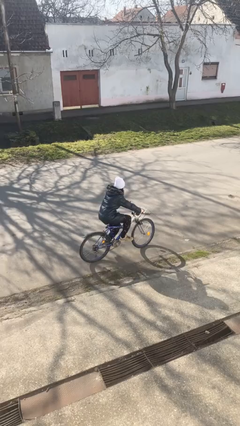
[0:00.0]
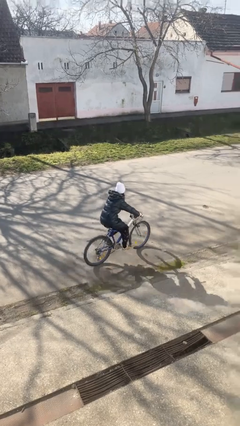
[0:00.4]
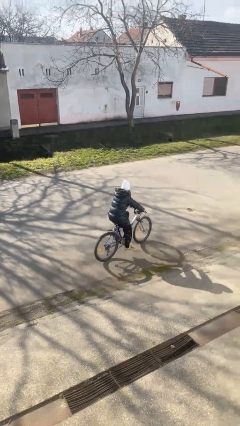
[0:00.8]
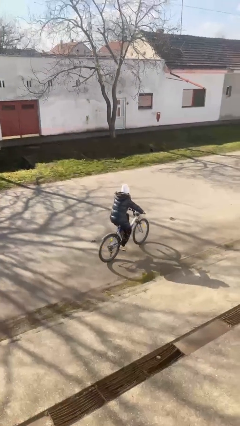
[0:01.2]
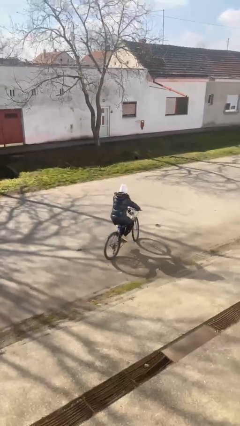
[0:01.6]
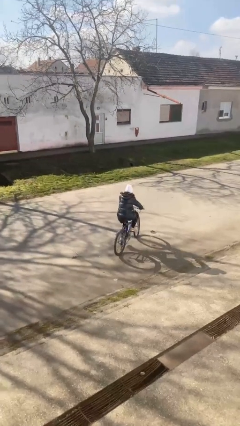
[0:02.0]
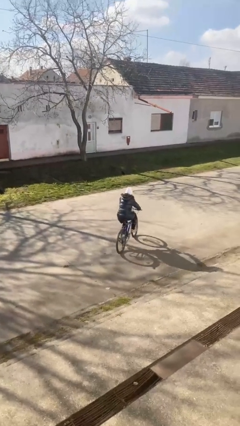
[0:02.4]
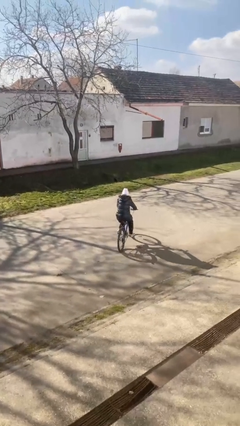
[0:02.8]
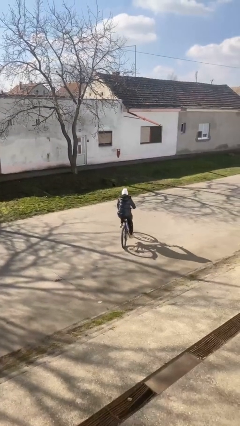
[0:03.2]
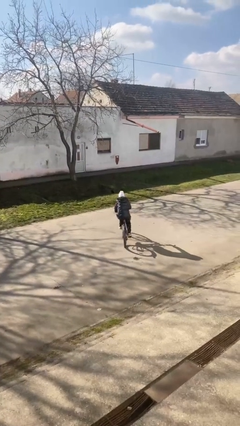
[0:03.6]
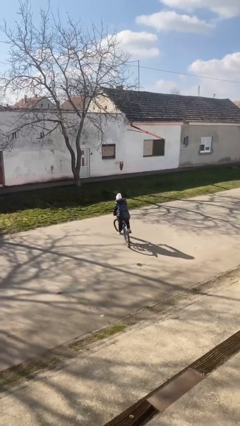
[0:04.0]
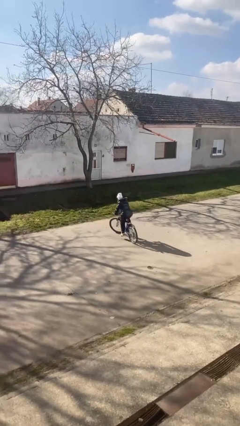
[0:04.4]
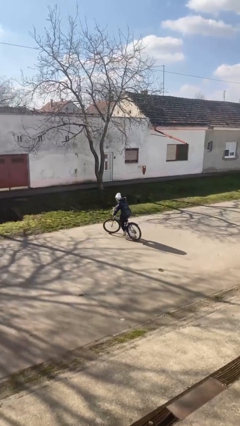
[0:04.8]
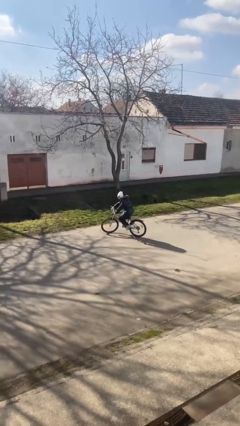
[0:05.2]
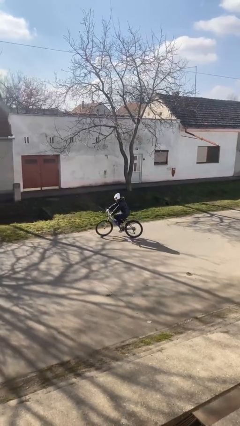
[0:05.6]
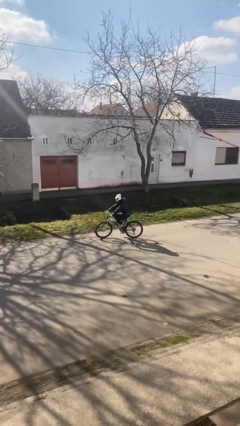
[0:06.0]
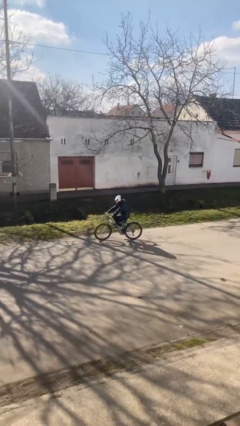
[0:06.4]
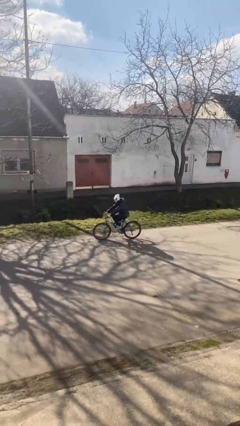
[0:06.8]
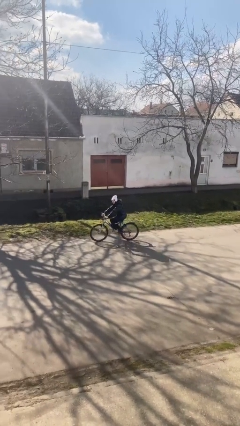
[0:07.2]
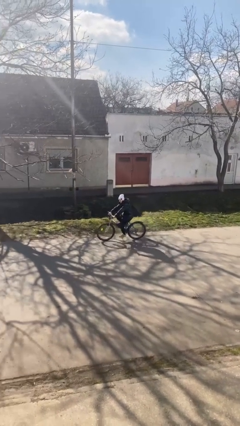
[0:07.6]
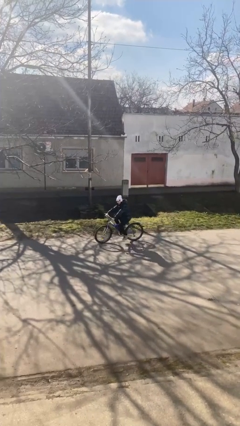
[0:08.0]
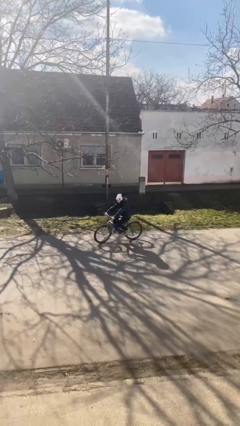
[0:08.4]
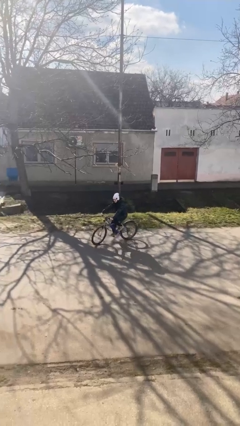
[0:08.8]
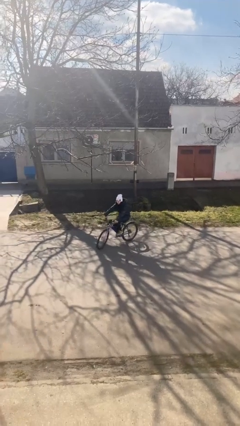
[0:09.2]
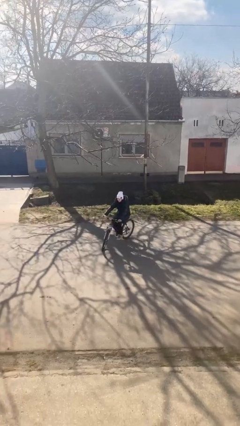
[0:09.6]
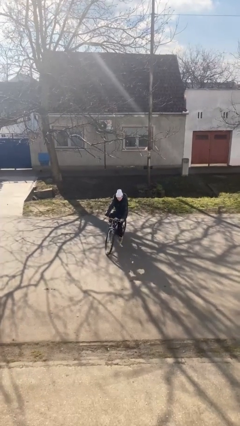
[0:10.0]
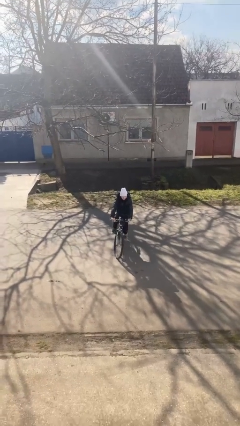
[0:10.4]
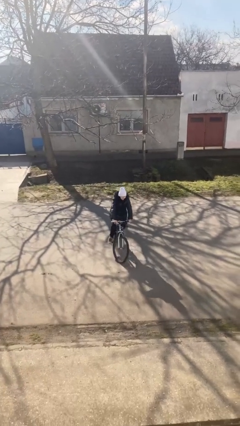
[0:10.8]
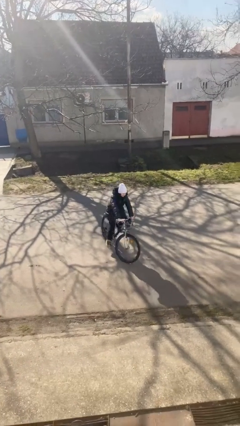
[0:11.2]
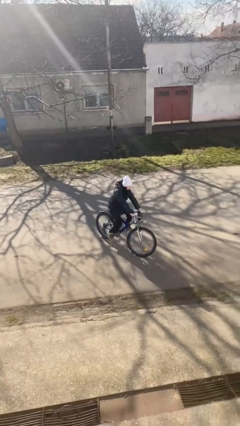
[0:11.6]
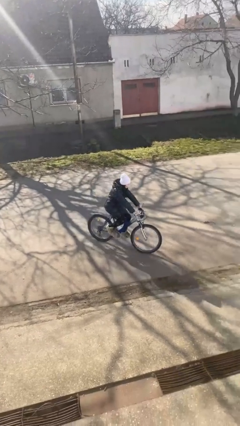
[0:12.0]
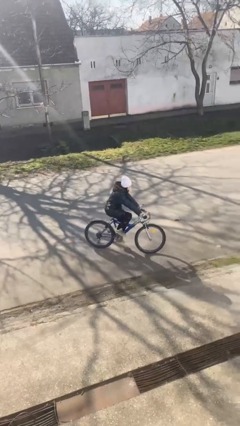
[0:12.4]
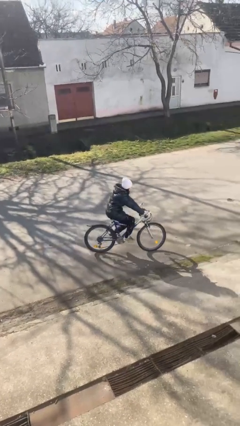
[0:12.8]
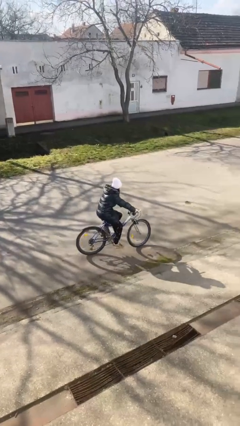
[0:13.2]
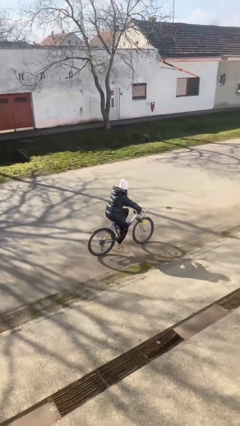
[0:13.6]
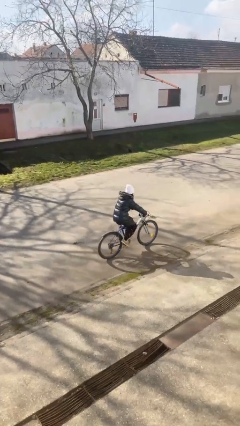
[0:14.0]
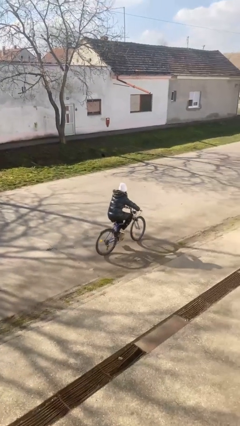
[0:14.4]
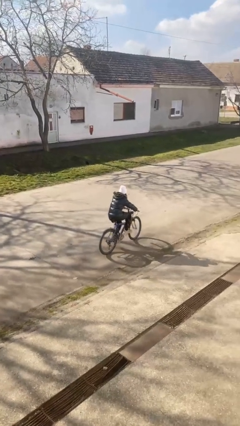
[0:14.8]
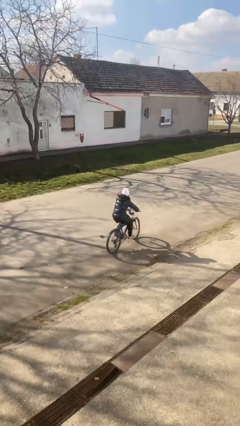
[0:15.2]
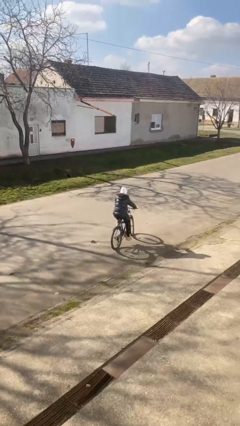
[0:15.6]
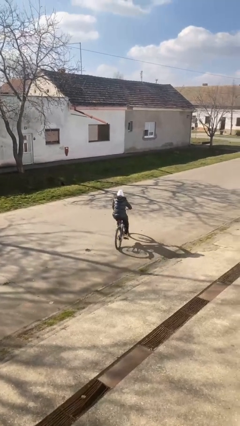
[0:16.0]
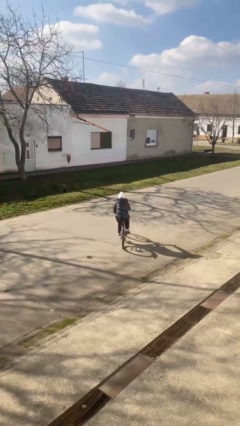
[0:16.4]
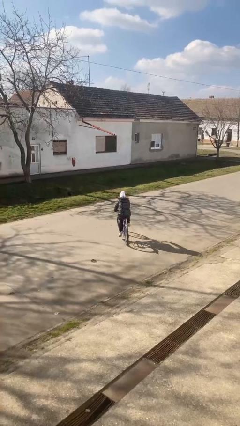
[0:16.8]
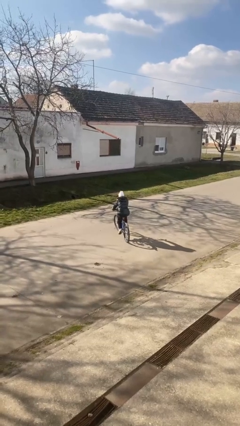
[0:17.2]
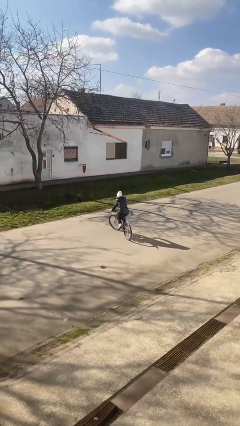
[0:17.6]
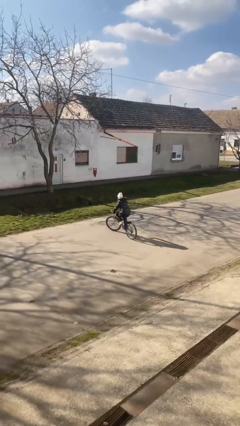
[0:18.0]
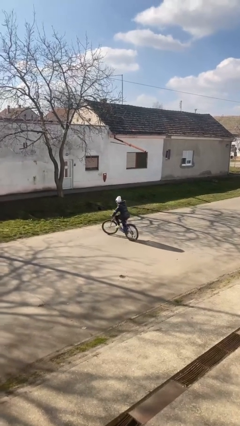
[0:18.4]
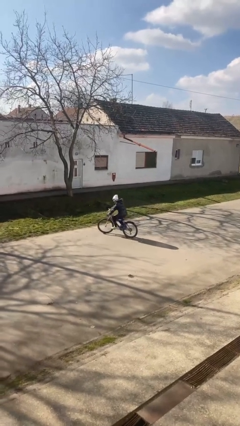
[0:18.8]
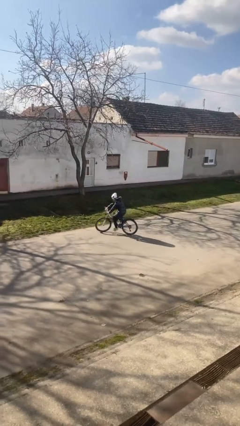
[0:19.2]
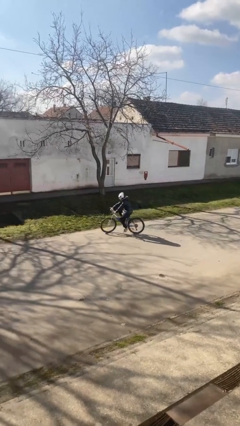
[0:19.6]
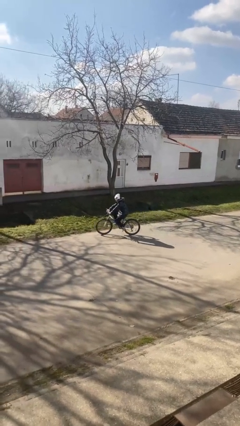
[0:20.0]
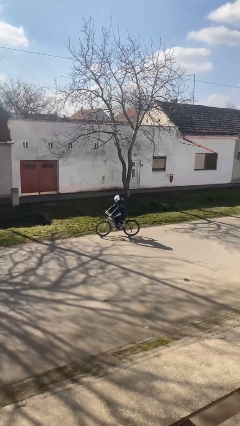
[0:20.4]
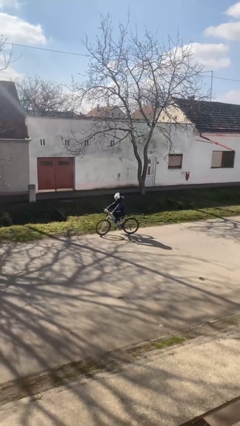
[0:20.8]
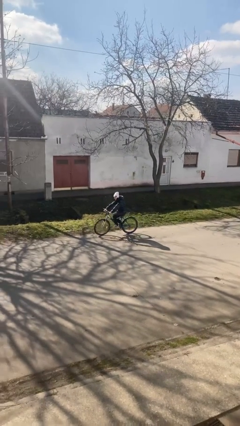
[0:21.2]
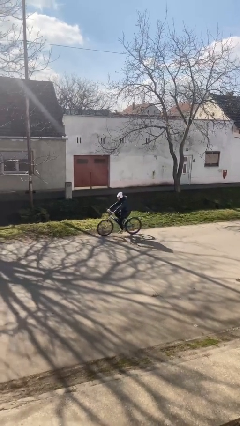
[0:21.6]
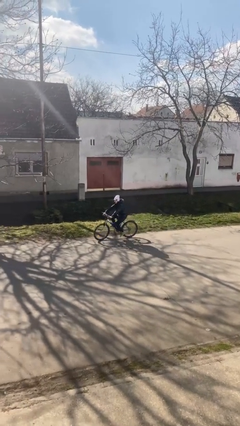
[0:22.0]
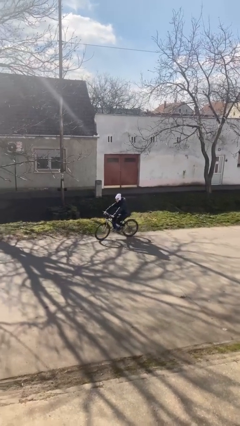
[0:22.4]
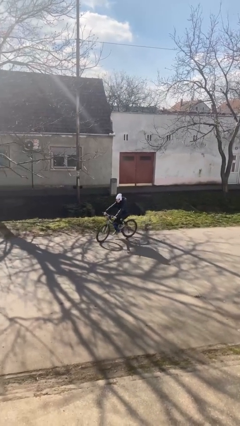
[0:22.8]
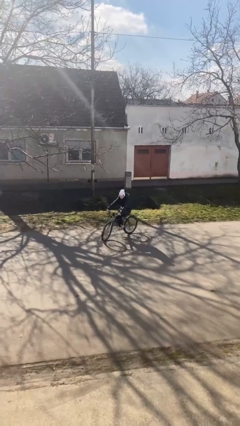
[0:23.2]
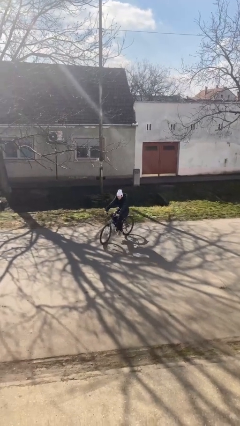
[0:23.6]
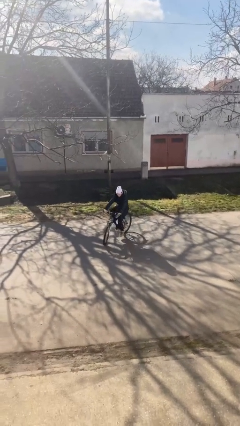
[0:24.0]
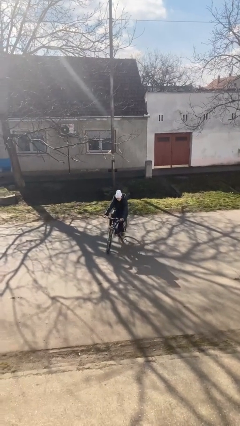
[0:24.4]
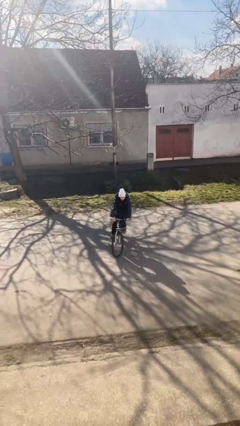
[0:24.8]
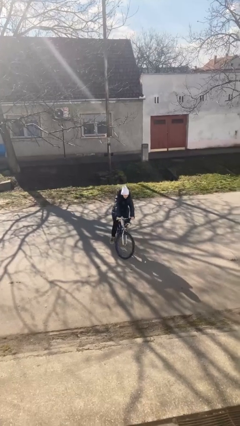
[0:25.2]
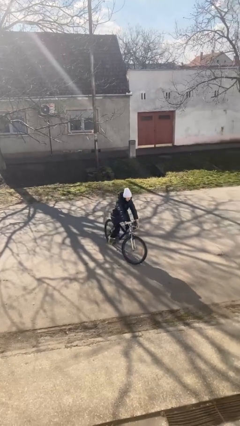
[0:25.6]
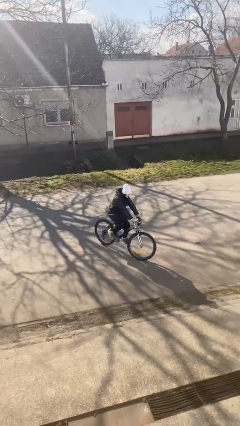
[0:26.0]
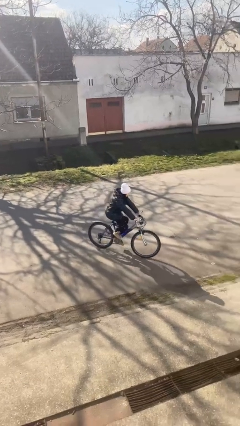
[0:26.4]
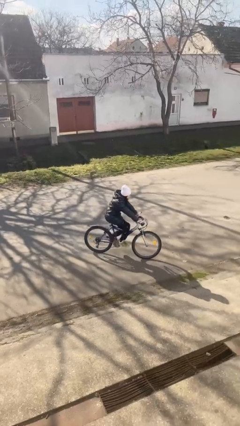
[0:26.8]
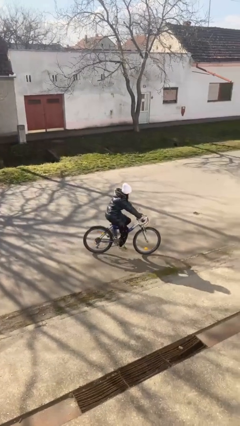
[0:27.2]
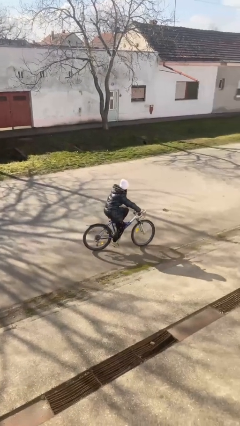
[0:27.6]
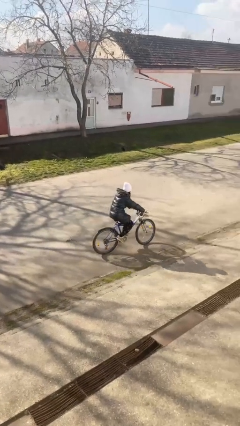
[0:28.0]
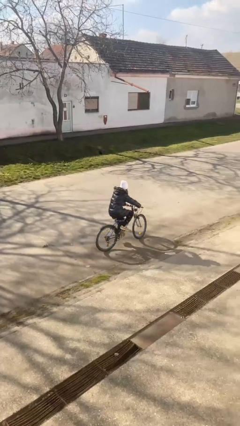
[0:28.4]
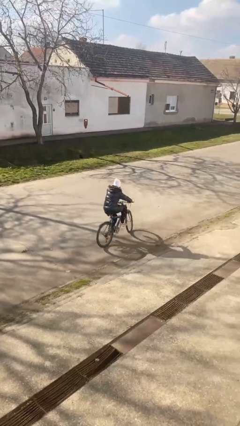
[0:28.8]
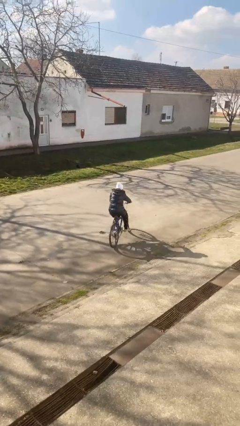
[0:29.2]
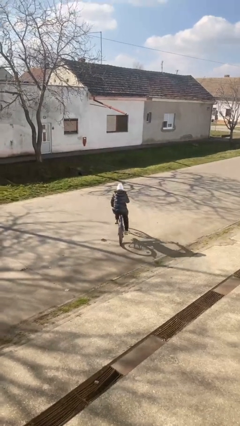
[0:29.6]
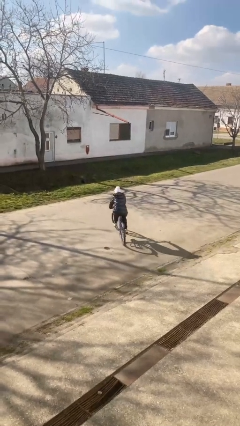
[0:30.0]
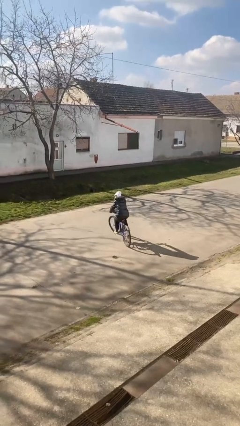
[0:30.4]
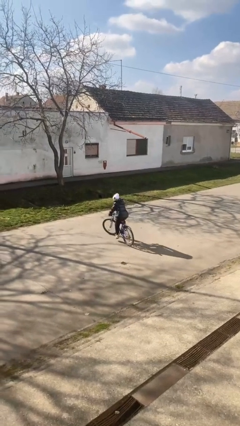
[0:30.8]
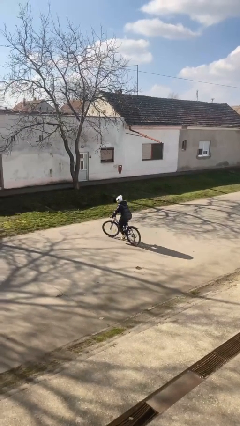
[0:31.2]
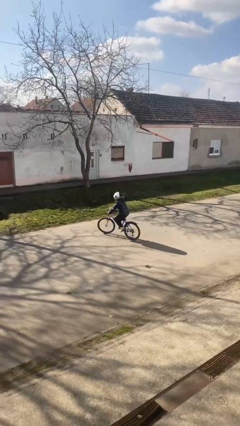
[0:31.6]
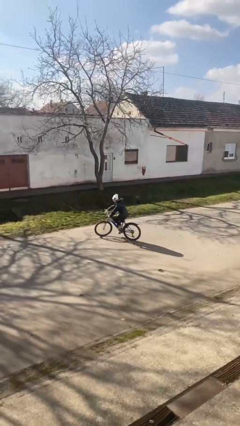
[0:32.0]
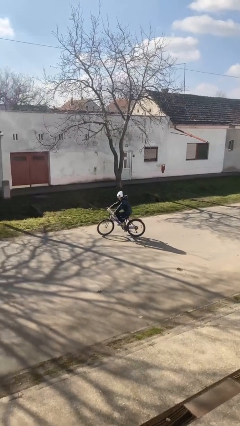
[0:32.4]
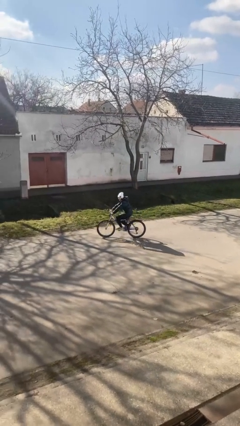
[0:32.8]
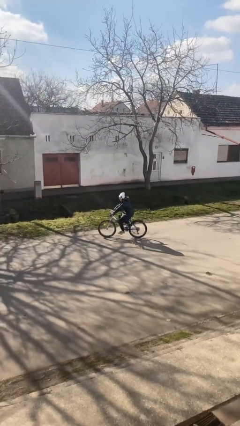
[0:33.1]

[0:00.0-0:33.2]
person rides bicycle

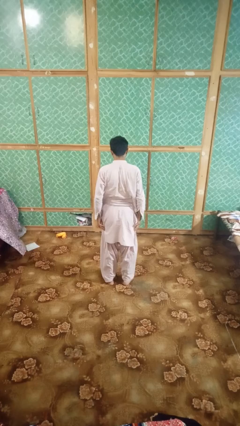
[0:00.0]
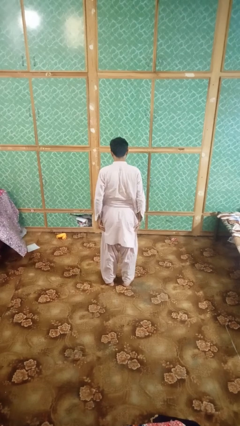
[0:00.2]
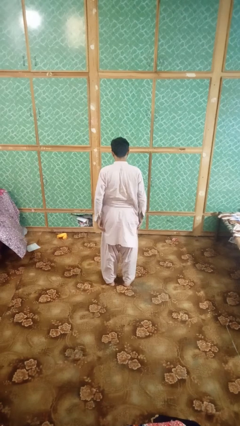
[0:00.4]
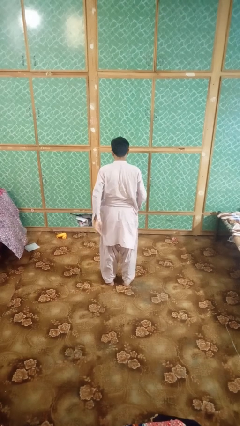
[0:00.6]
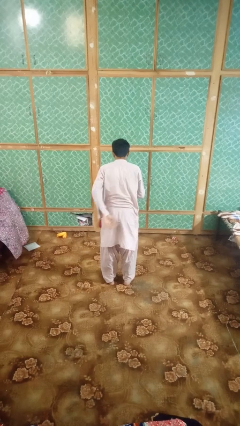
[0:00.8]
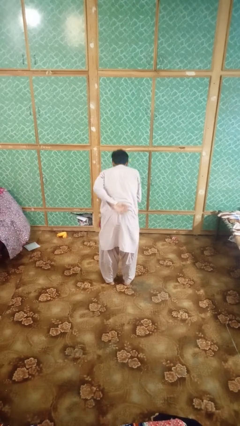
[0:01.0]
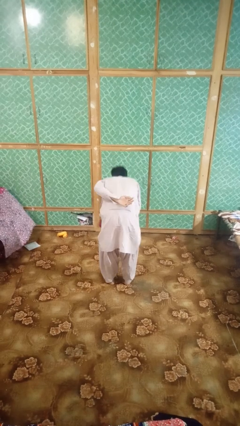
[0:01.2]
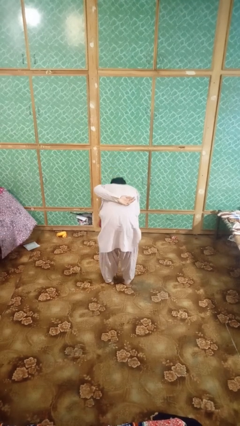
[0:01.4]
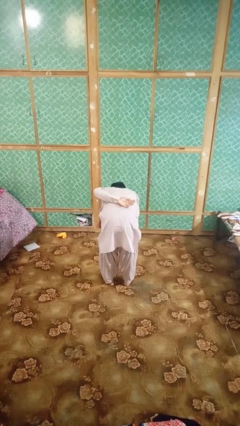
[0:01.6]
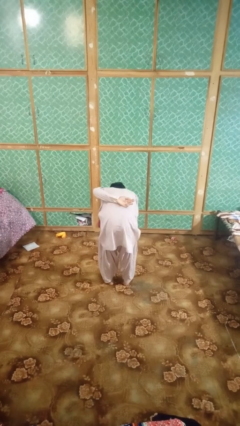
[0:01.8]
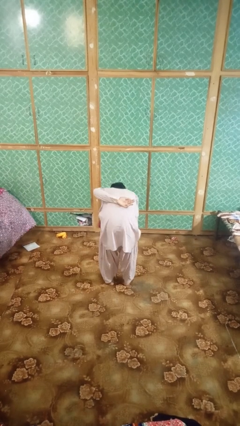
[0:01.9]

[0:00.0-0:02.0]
person bows
